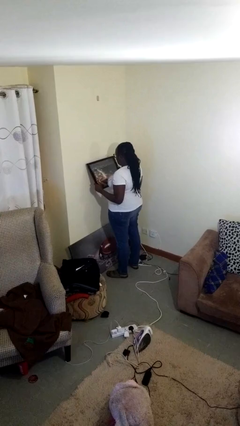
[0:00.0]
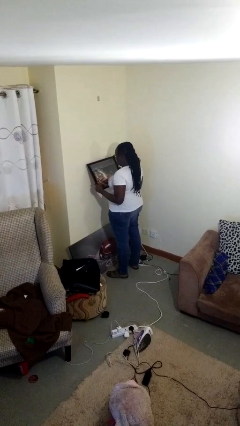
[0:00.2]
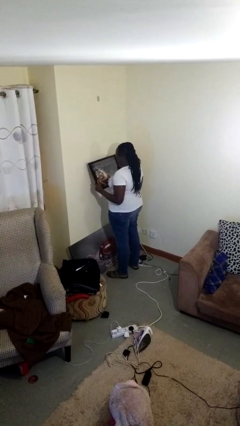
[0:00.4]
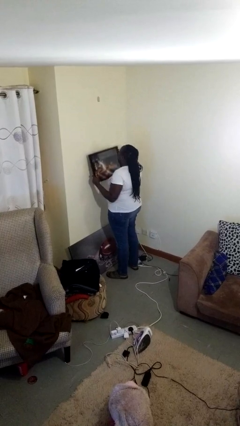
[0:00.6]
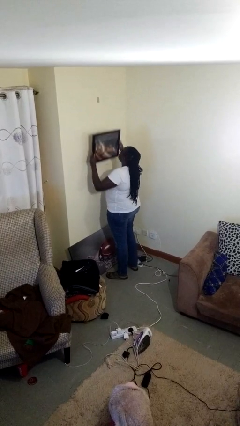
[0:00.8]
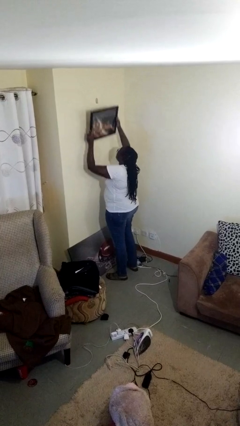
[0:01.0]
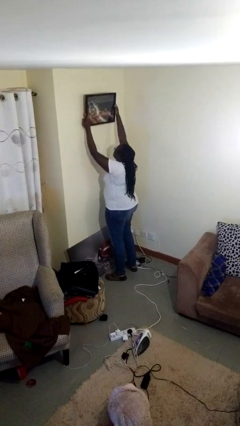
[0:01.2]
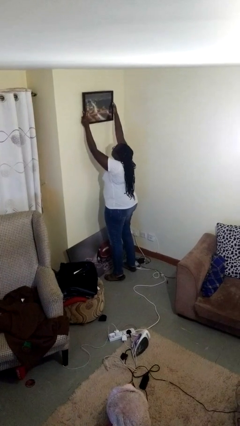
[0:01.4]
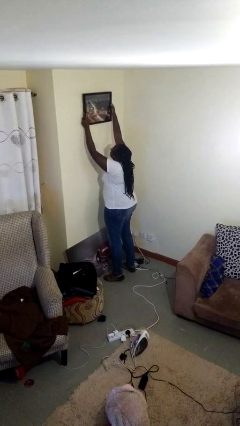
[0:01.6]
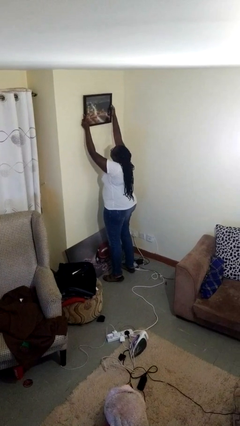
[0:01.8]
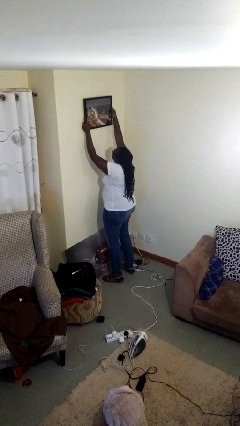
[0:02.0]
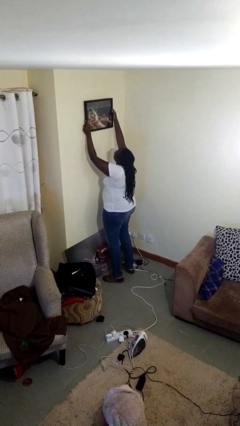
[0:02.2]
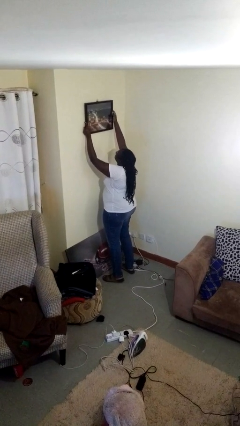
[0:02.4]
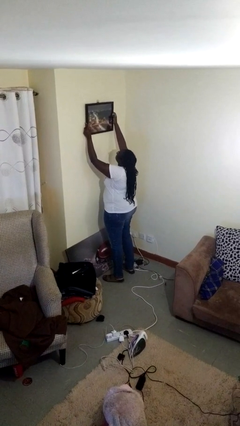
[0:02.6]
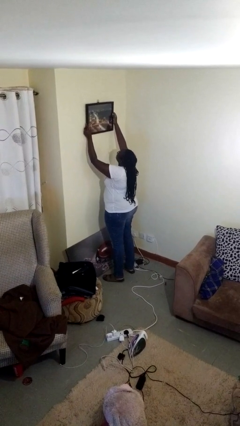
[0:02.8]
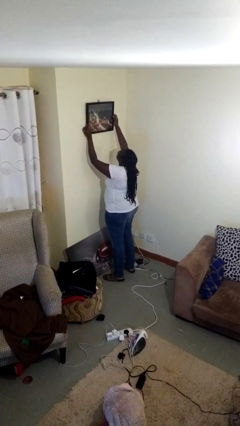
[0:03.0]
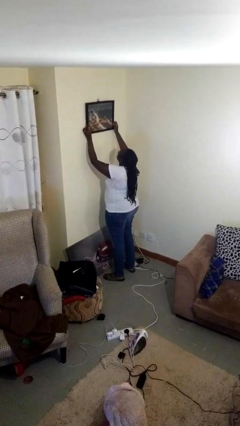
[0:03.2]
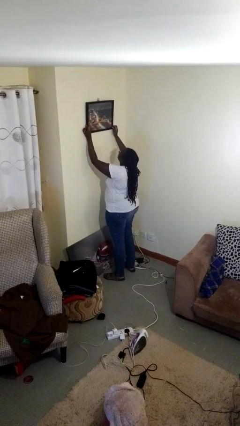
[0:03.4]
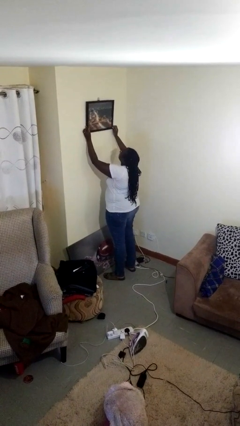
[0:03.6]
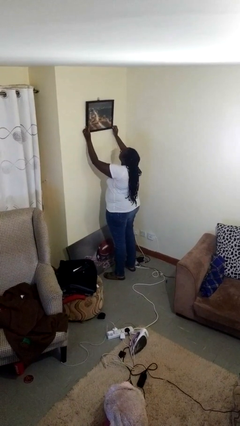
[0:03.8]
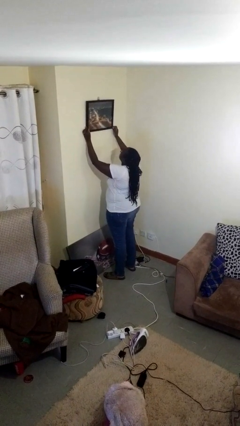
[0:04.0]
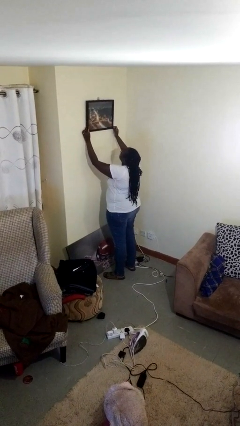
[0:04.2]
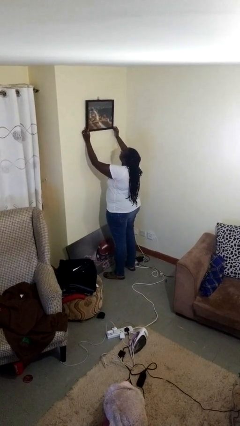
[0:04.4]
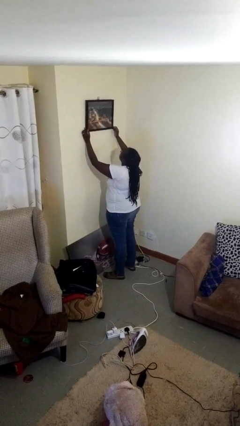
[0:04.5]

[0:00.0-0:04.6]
person puts up picture frame

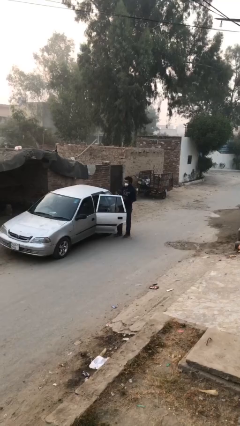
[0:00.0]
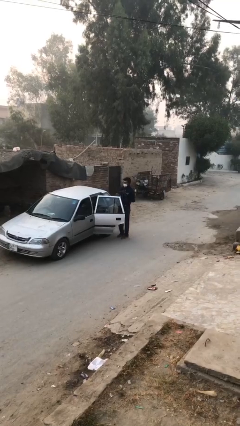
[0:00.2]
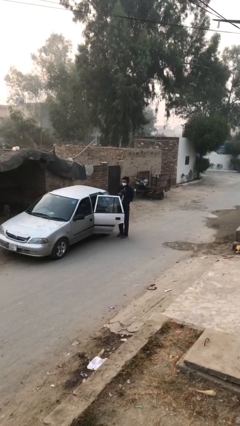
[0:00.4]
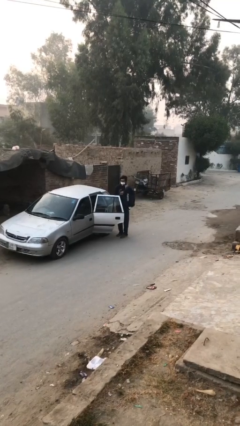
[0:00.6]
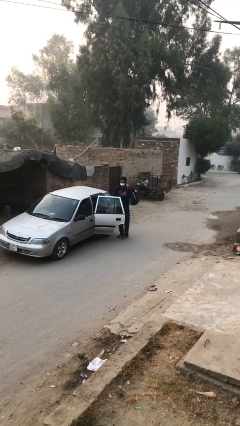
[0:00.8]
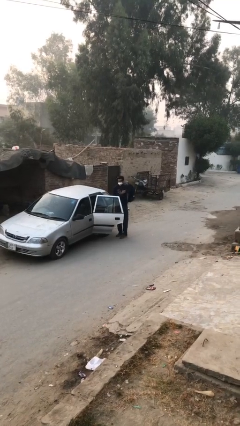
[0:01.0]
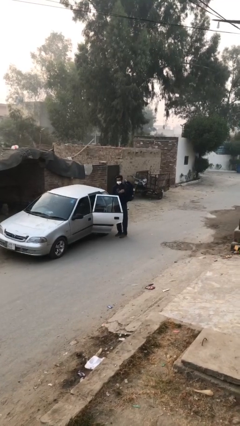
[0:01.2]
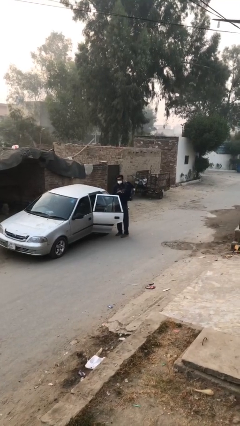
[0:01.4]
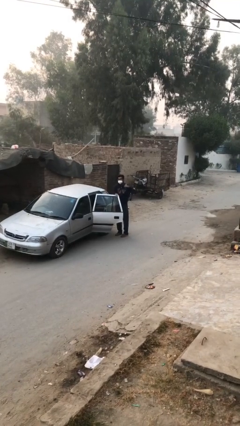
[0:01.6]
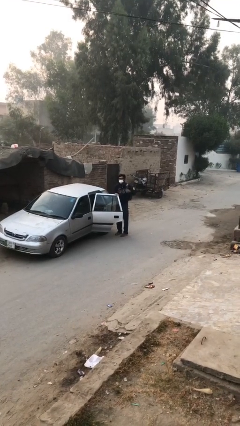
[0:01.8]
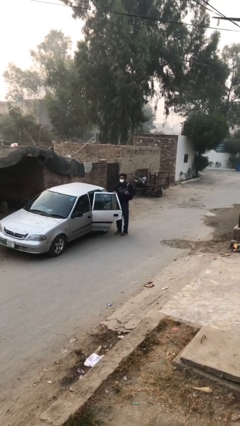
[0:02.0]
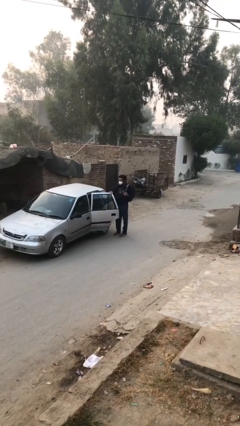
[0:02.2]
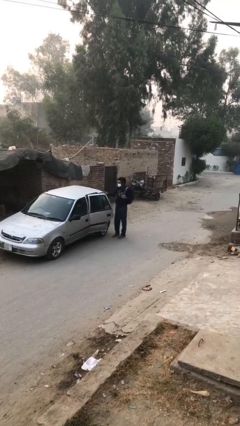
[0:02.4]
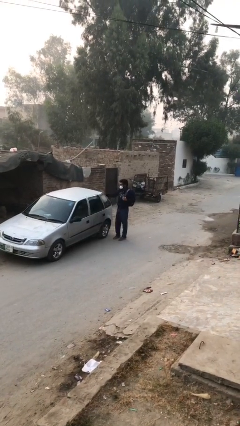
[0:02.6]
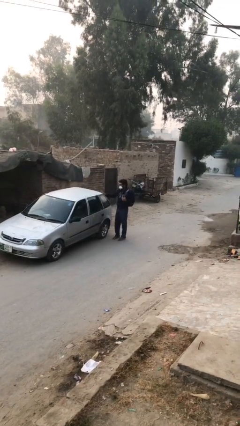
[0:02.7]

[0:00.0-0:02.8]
person closes car door

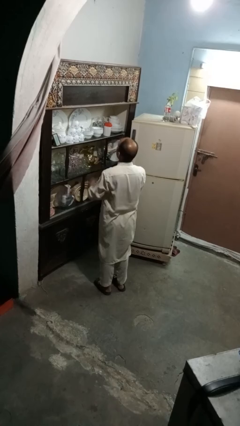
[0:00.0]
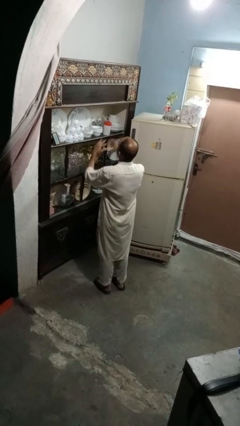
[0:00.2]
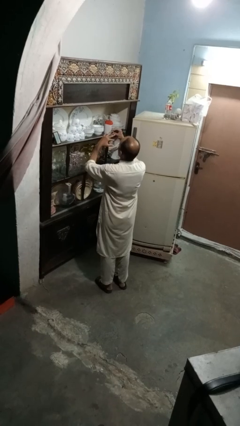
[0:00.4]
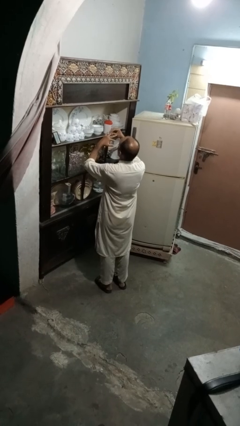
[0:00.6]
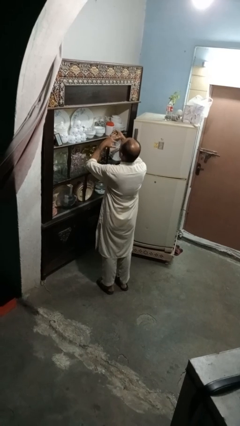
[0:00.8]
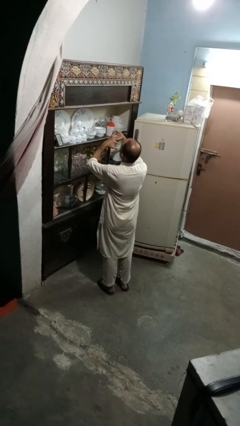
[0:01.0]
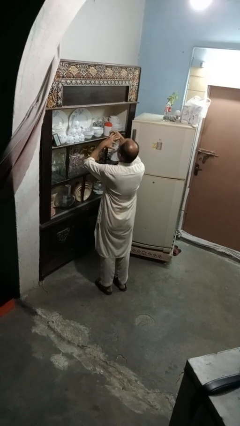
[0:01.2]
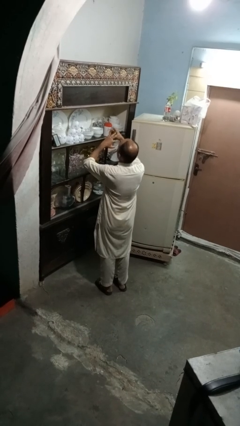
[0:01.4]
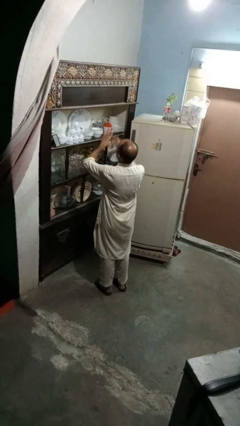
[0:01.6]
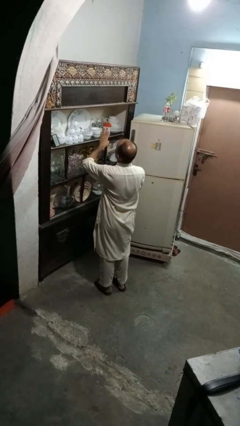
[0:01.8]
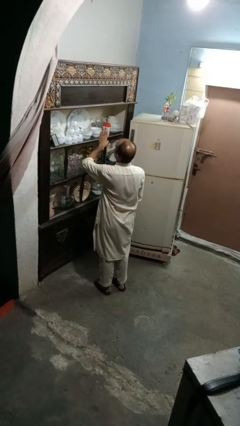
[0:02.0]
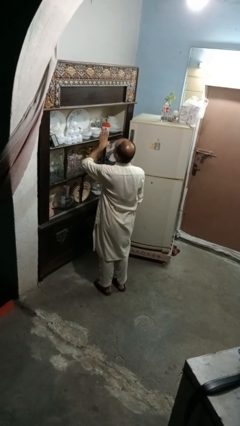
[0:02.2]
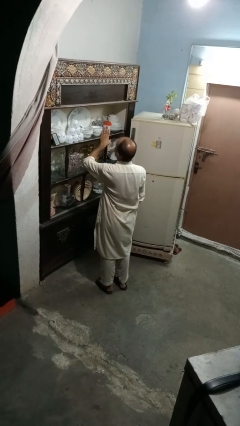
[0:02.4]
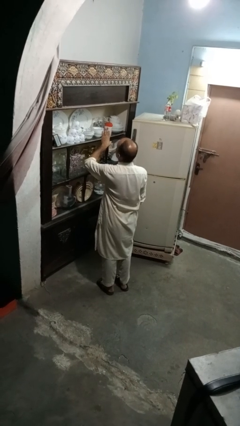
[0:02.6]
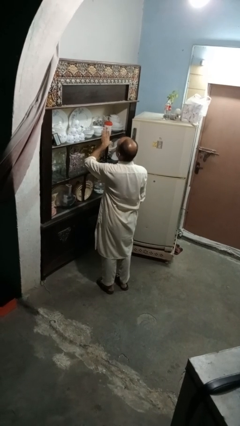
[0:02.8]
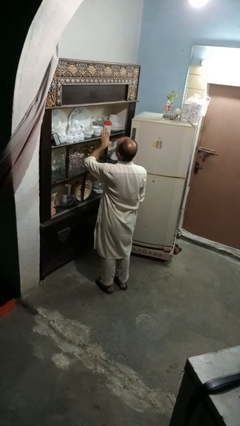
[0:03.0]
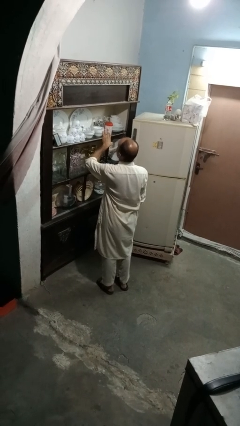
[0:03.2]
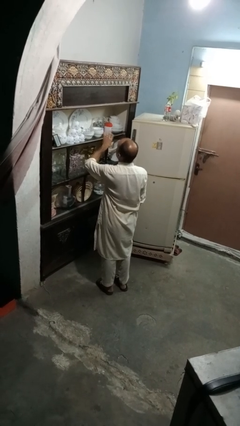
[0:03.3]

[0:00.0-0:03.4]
person puts on ring

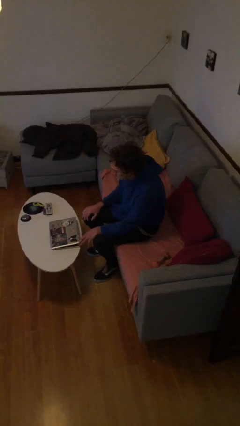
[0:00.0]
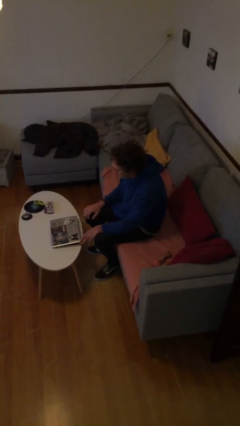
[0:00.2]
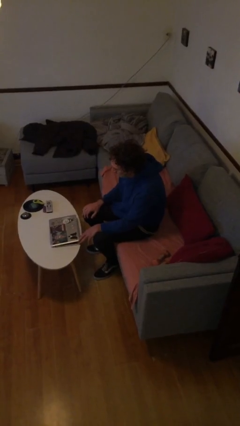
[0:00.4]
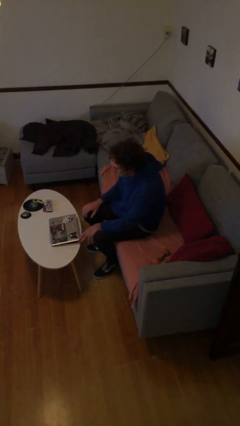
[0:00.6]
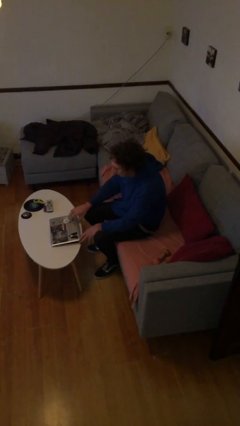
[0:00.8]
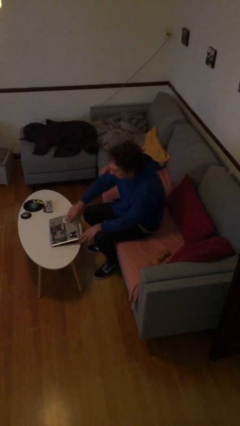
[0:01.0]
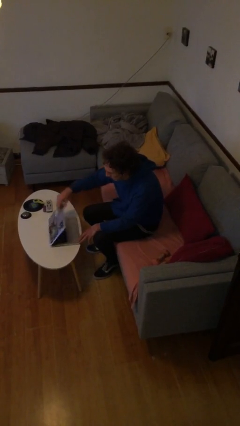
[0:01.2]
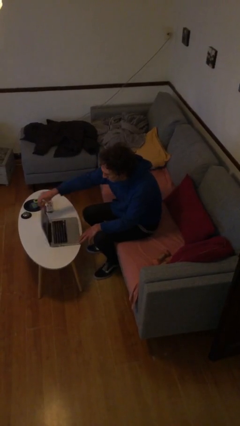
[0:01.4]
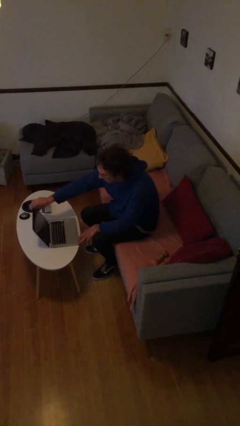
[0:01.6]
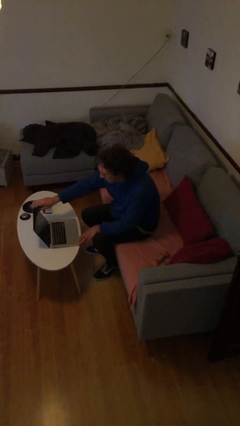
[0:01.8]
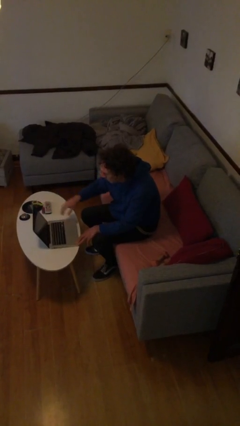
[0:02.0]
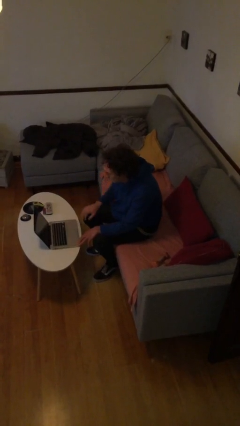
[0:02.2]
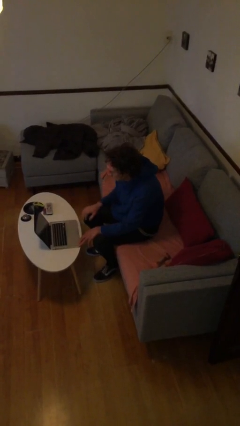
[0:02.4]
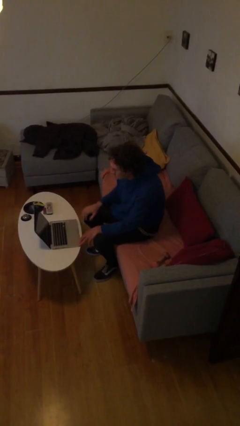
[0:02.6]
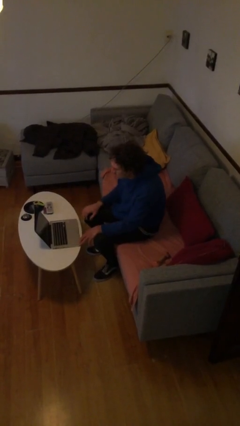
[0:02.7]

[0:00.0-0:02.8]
person opens laptop

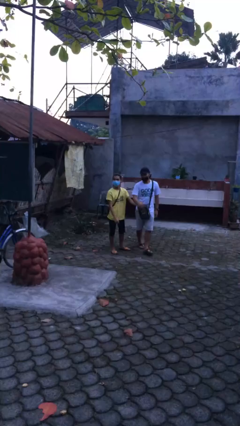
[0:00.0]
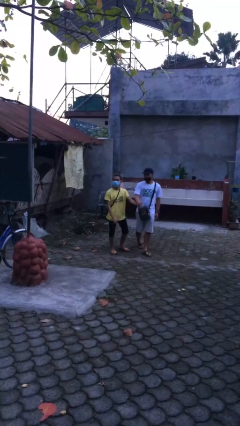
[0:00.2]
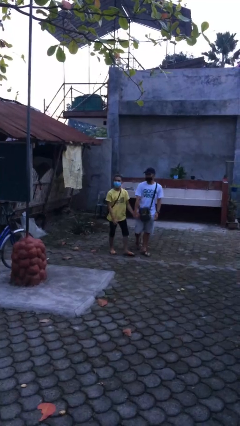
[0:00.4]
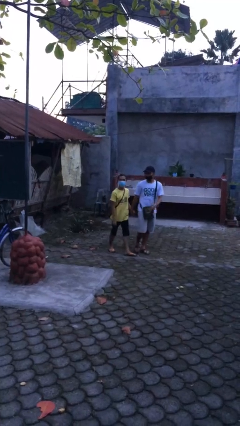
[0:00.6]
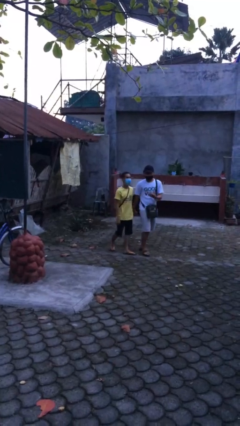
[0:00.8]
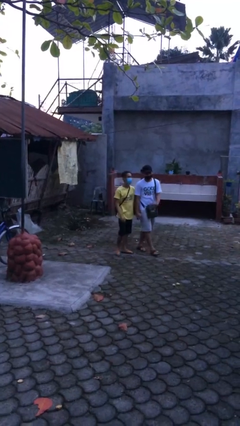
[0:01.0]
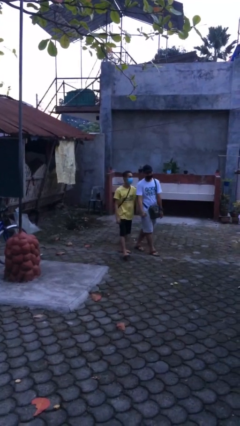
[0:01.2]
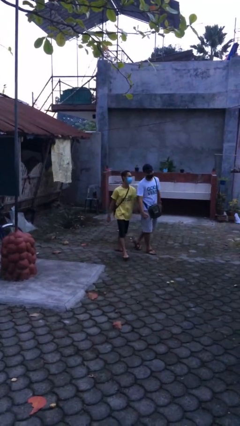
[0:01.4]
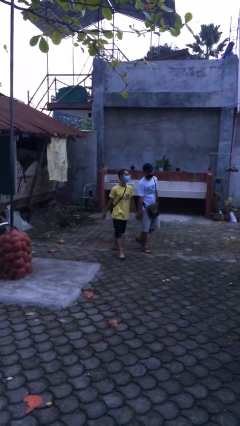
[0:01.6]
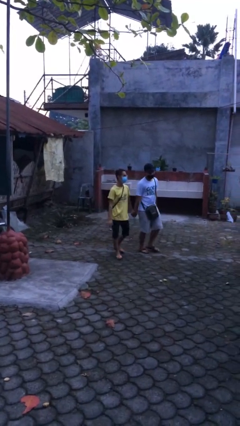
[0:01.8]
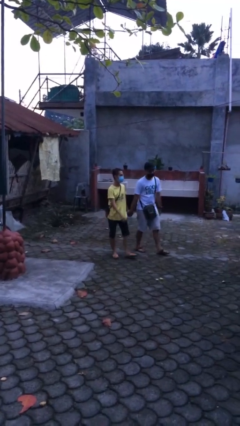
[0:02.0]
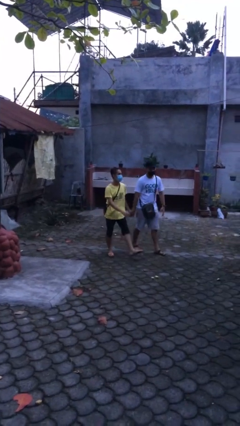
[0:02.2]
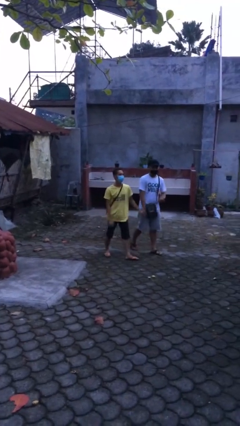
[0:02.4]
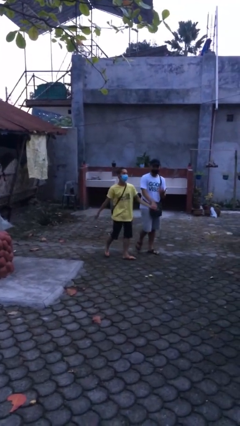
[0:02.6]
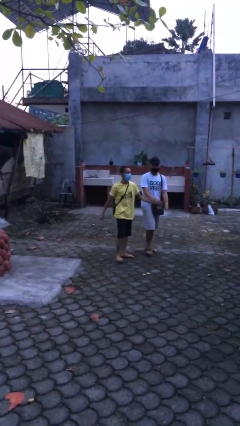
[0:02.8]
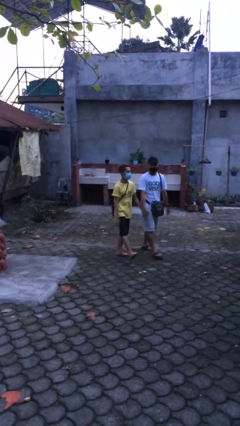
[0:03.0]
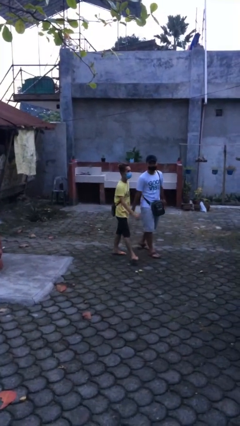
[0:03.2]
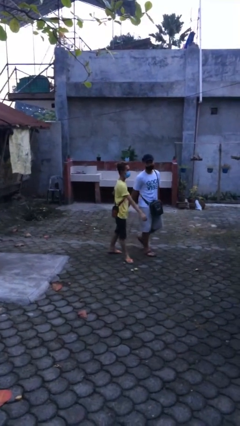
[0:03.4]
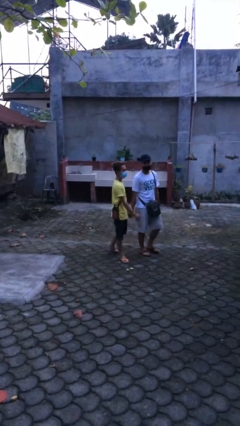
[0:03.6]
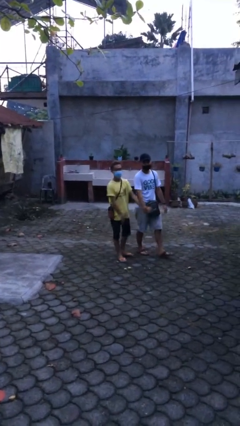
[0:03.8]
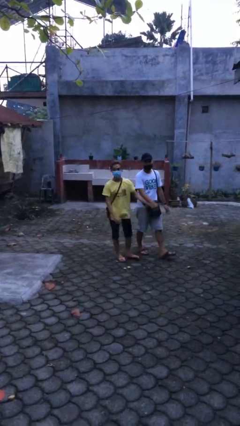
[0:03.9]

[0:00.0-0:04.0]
person holds hand
